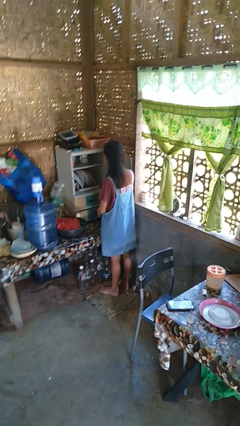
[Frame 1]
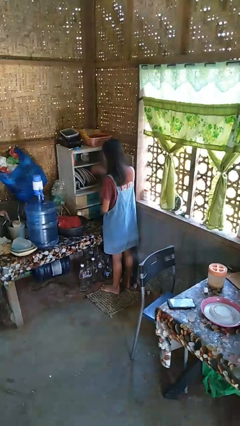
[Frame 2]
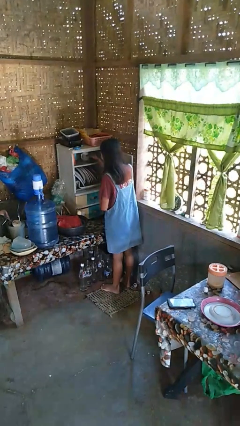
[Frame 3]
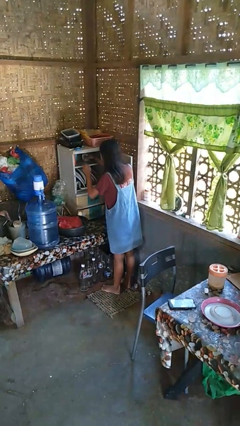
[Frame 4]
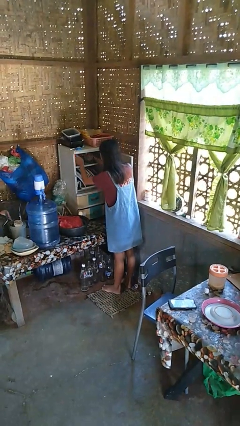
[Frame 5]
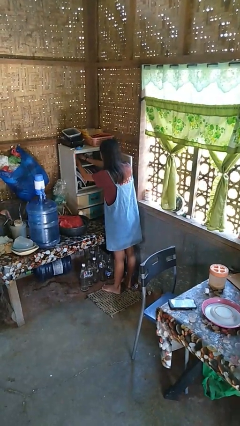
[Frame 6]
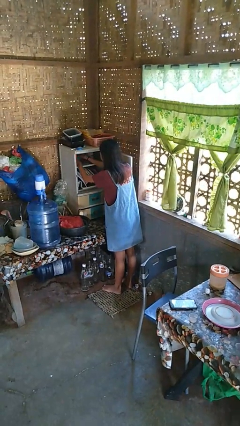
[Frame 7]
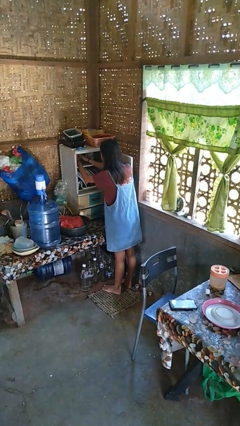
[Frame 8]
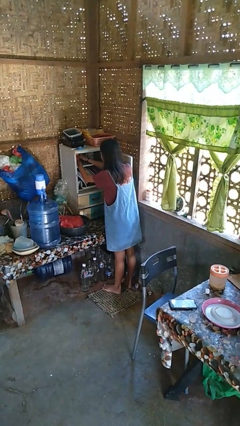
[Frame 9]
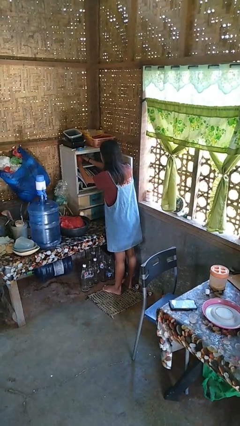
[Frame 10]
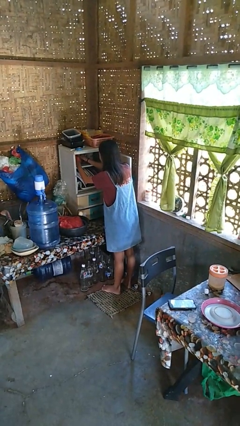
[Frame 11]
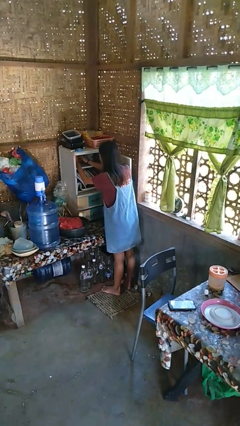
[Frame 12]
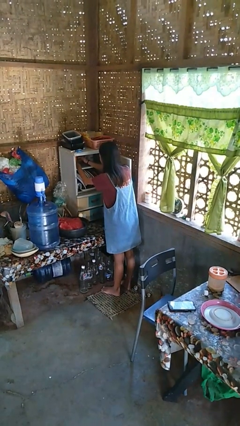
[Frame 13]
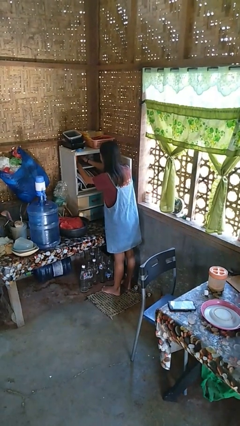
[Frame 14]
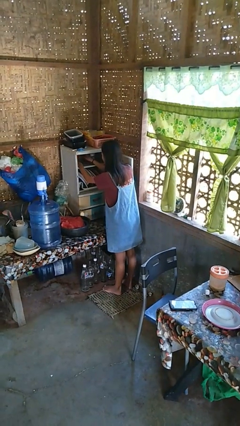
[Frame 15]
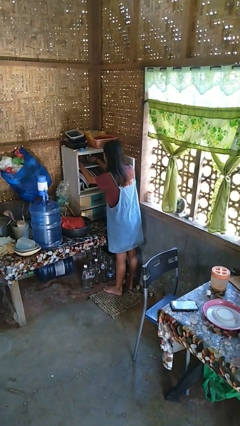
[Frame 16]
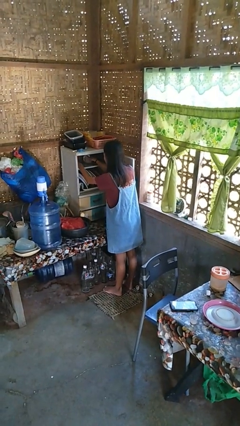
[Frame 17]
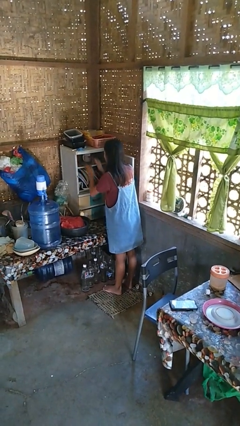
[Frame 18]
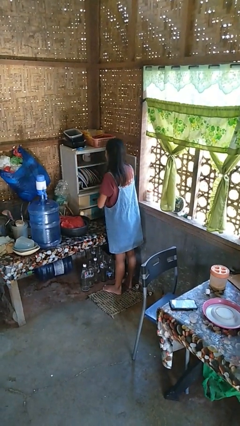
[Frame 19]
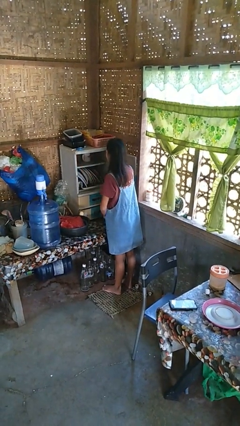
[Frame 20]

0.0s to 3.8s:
person searches in cabinet

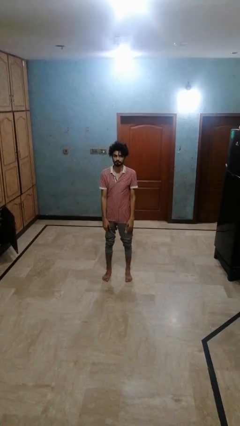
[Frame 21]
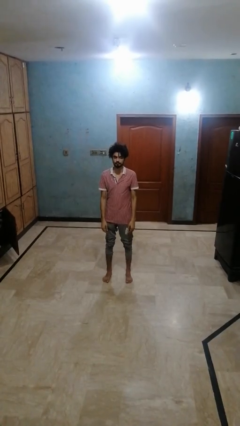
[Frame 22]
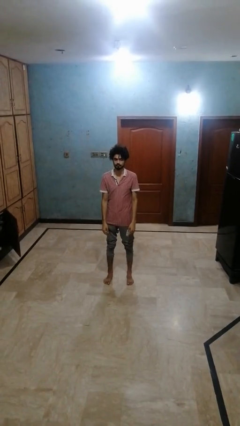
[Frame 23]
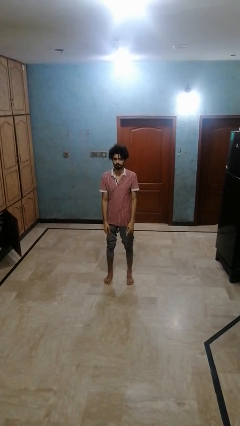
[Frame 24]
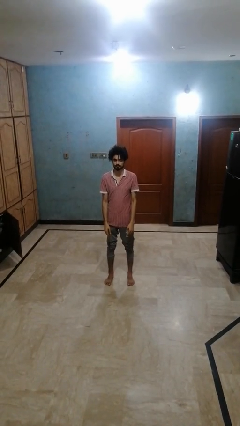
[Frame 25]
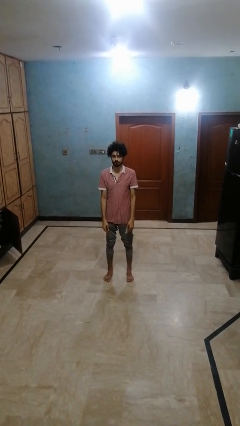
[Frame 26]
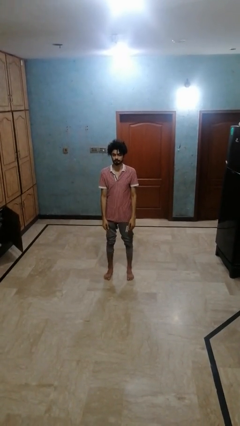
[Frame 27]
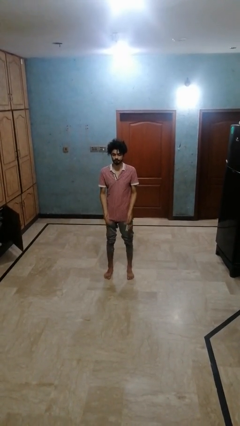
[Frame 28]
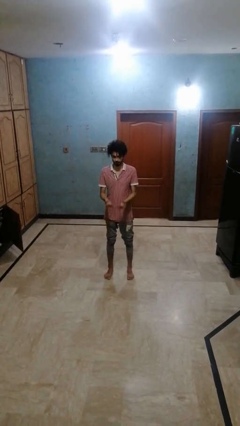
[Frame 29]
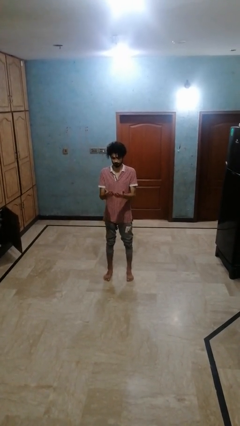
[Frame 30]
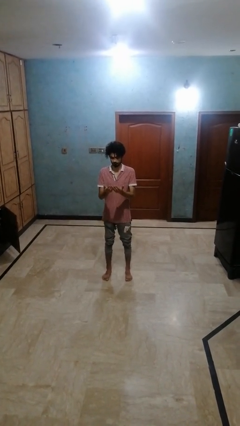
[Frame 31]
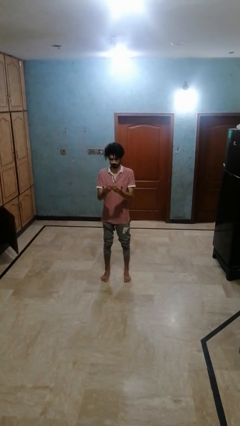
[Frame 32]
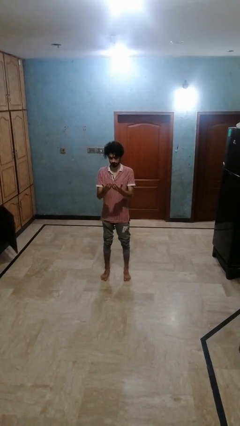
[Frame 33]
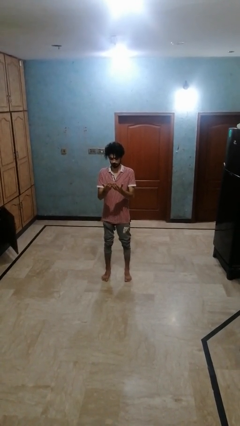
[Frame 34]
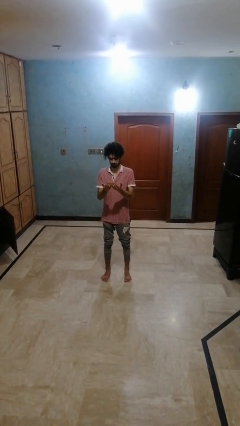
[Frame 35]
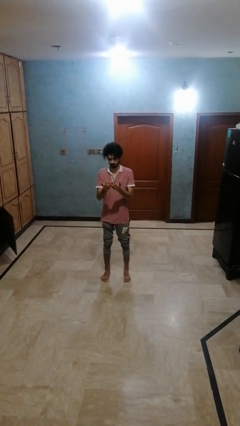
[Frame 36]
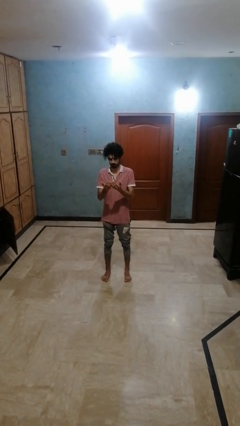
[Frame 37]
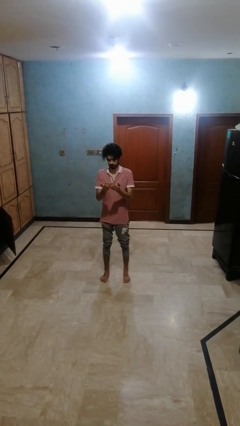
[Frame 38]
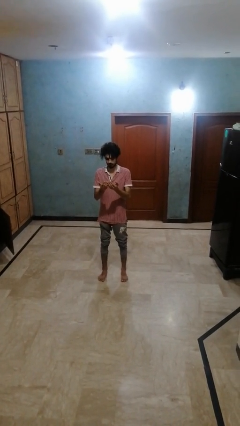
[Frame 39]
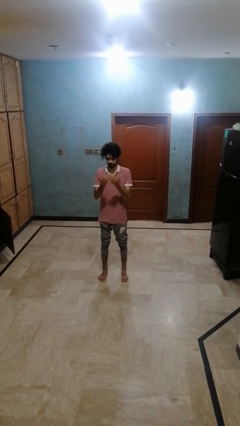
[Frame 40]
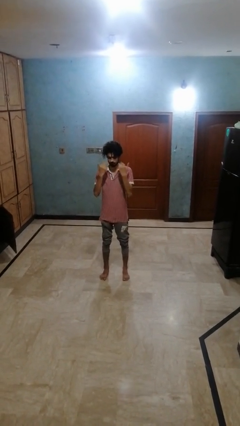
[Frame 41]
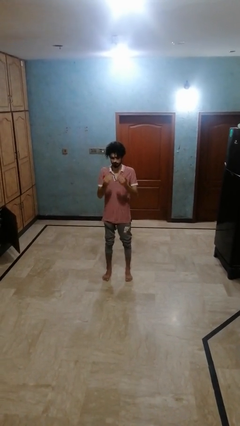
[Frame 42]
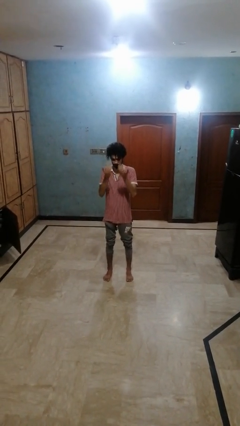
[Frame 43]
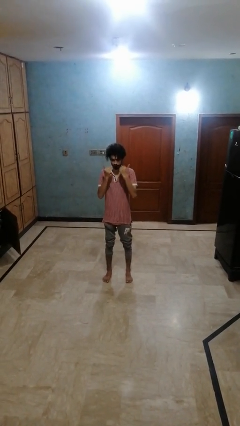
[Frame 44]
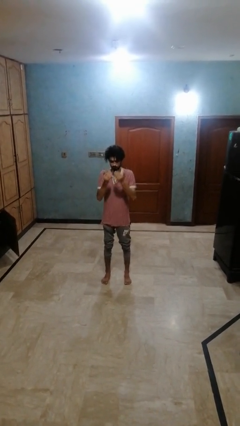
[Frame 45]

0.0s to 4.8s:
person prays

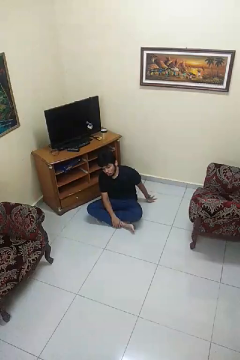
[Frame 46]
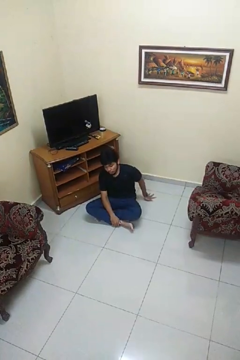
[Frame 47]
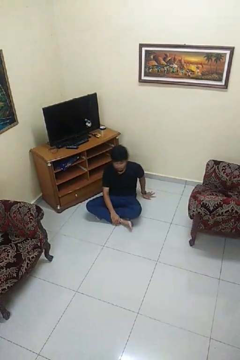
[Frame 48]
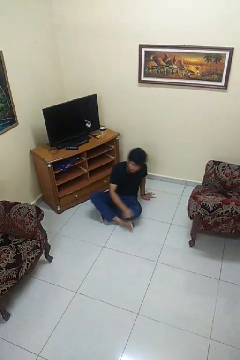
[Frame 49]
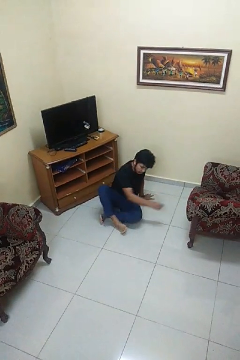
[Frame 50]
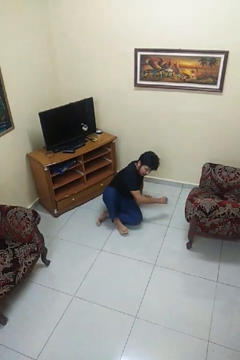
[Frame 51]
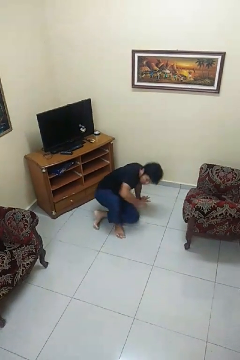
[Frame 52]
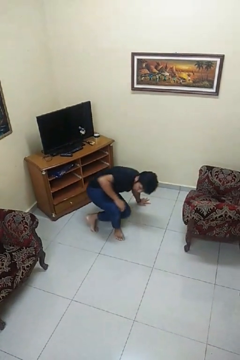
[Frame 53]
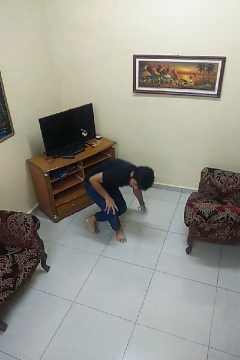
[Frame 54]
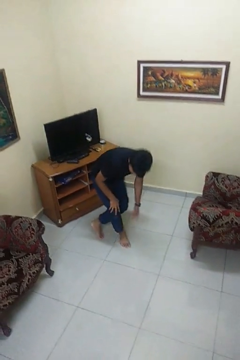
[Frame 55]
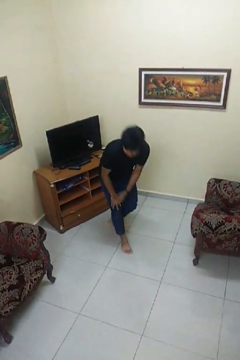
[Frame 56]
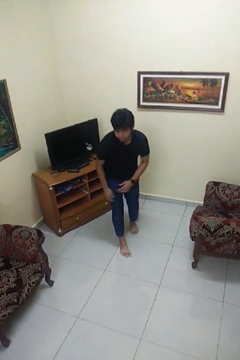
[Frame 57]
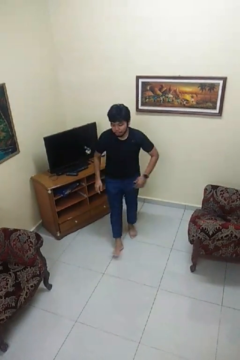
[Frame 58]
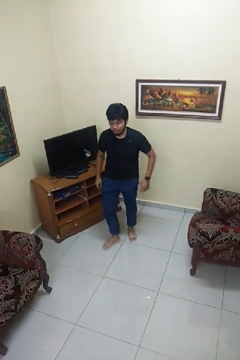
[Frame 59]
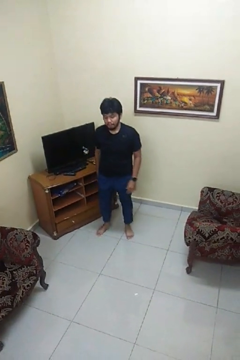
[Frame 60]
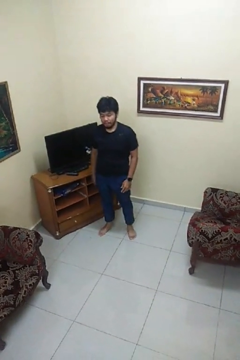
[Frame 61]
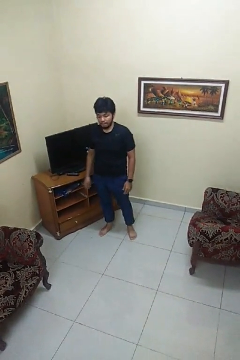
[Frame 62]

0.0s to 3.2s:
person stands up from floor

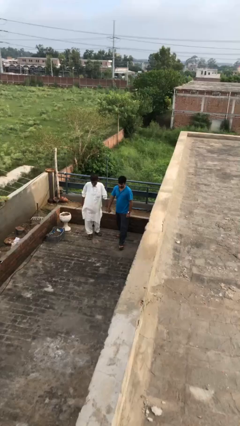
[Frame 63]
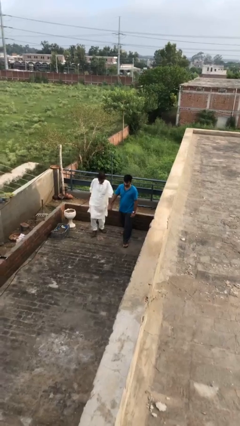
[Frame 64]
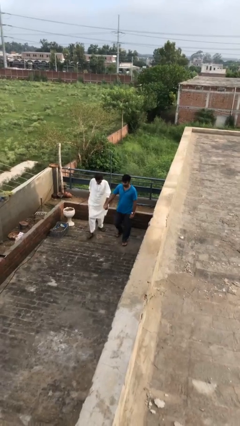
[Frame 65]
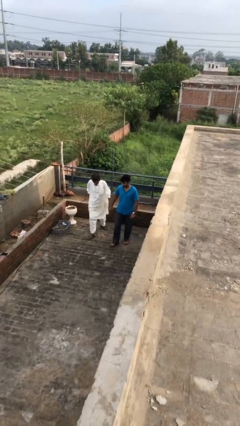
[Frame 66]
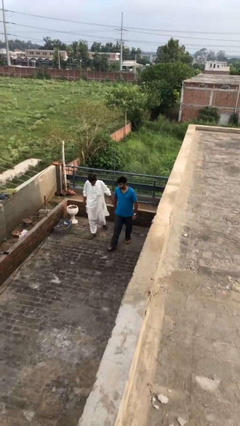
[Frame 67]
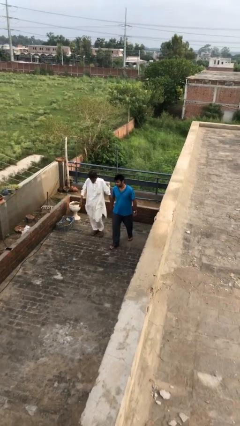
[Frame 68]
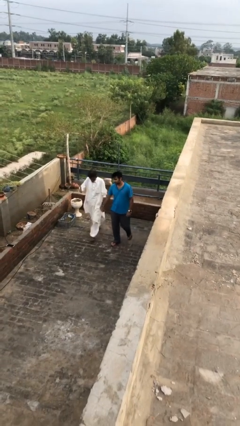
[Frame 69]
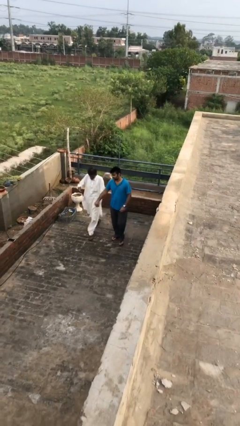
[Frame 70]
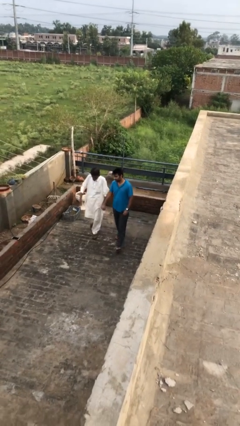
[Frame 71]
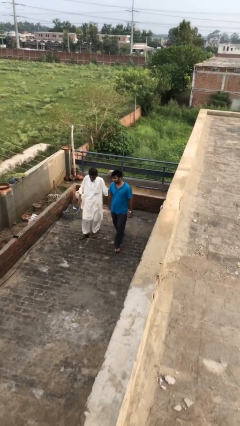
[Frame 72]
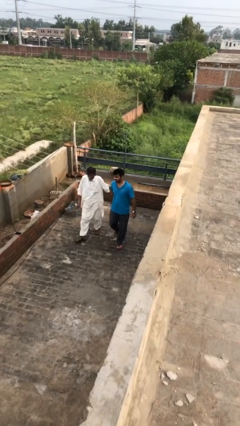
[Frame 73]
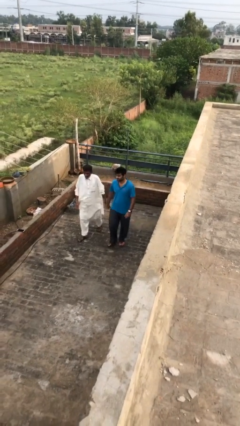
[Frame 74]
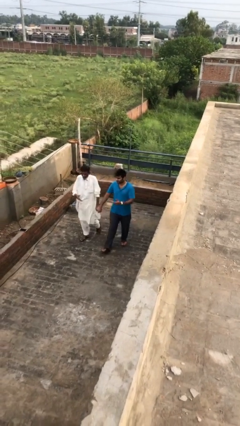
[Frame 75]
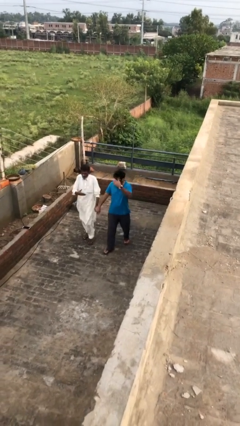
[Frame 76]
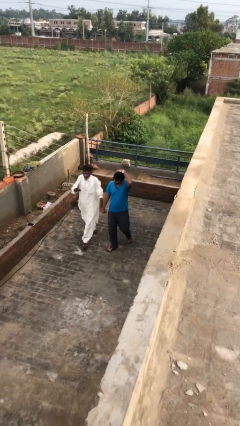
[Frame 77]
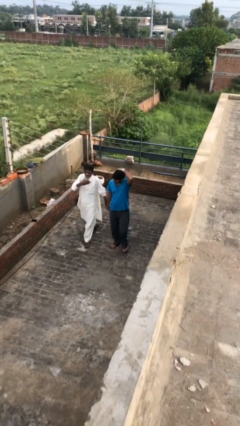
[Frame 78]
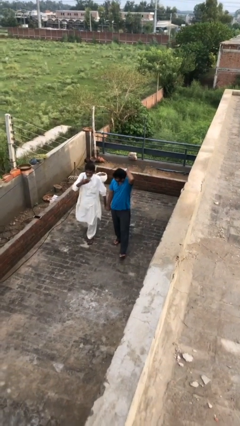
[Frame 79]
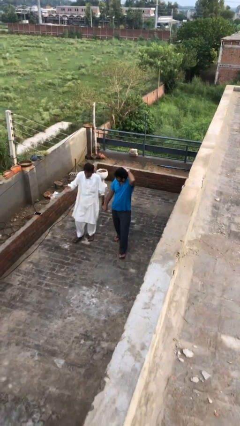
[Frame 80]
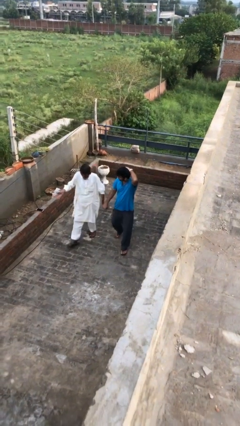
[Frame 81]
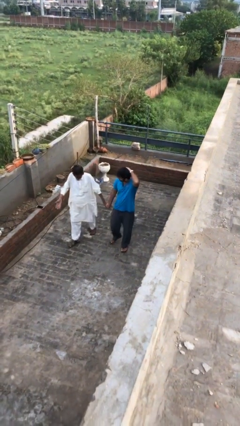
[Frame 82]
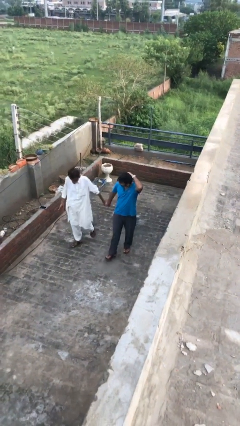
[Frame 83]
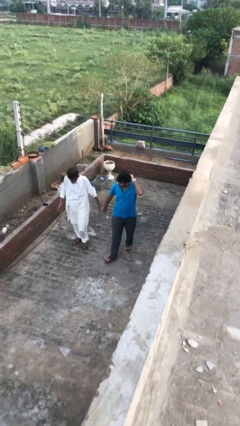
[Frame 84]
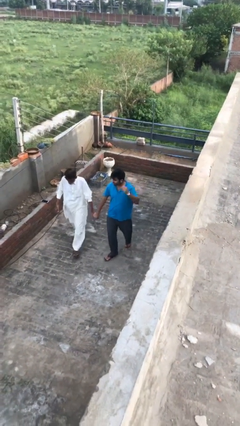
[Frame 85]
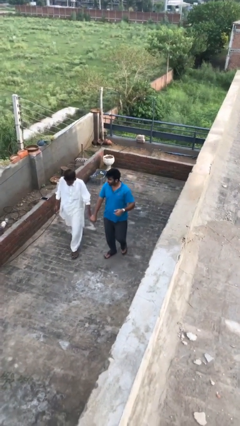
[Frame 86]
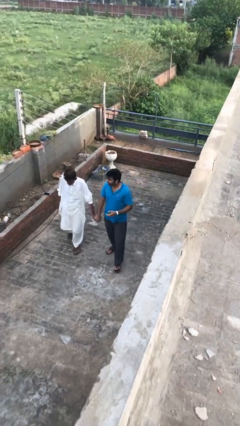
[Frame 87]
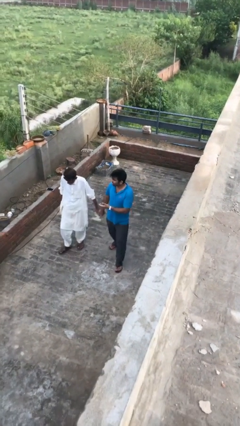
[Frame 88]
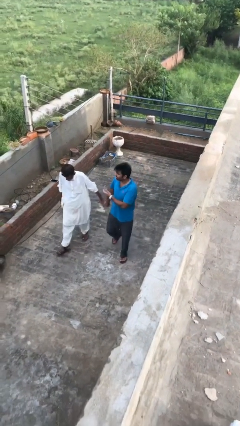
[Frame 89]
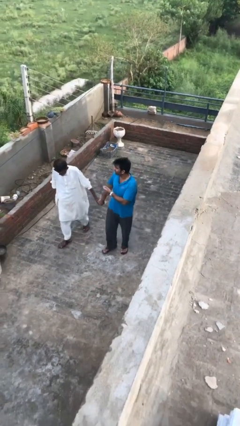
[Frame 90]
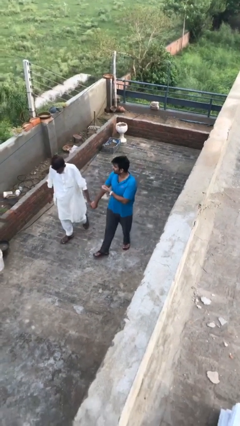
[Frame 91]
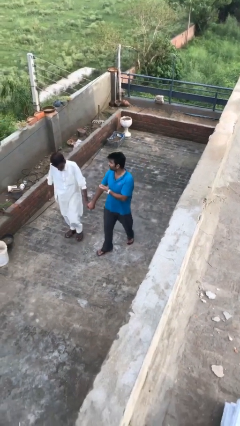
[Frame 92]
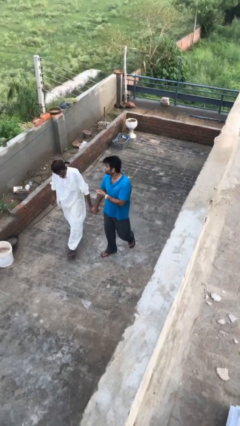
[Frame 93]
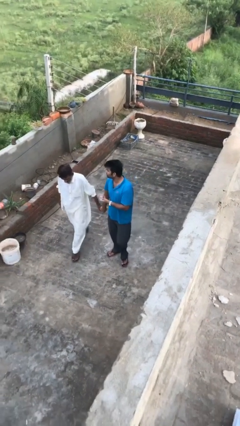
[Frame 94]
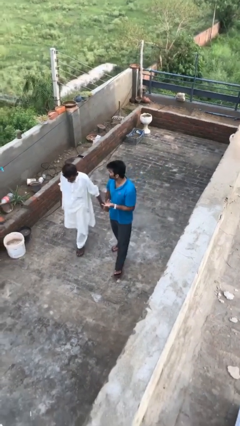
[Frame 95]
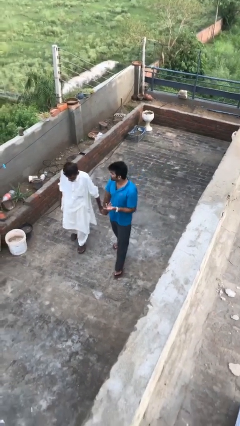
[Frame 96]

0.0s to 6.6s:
person holds hand
